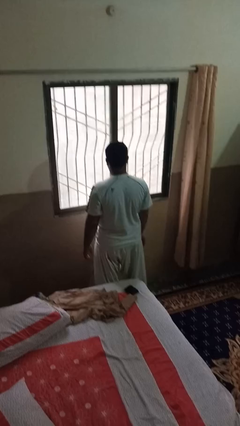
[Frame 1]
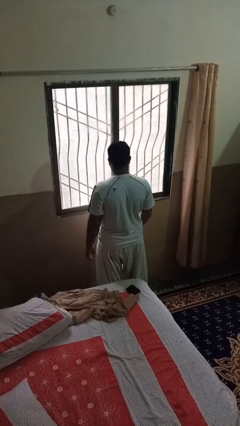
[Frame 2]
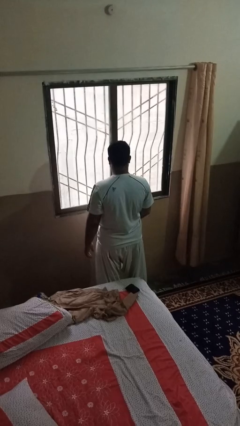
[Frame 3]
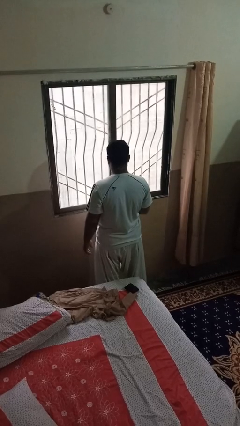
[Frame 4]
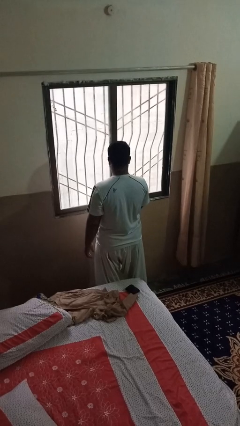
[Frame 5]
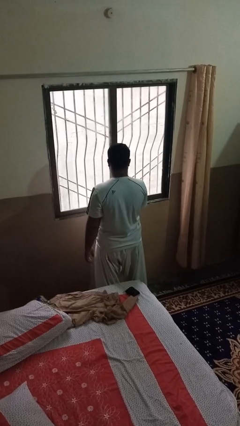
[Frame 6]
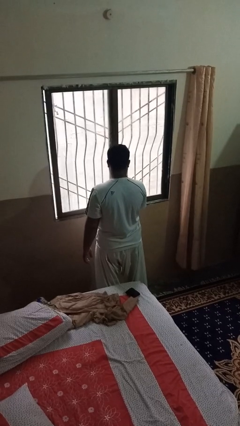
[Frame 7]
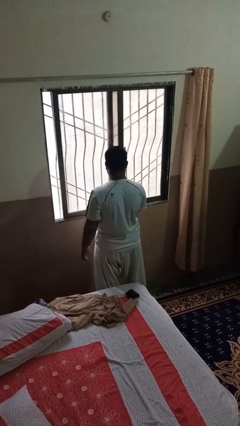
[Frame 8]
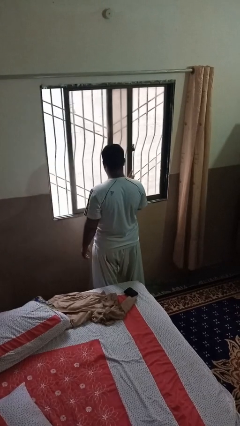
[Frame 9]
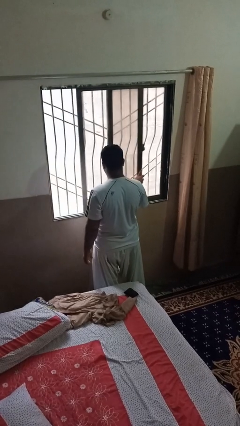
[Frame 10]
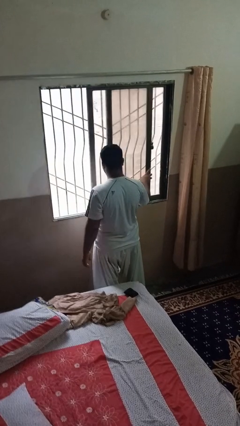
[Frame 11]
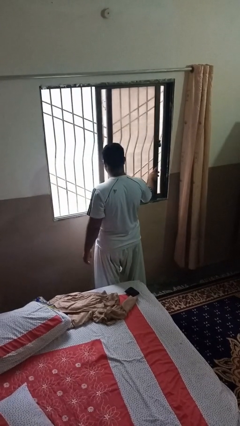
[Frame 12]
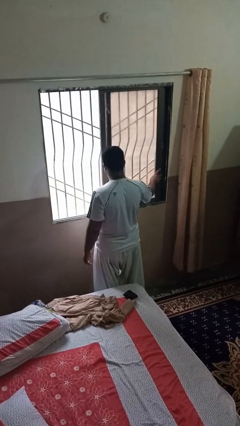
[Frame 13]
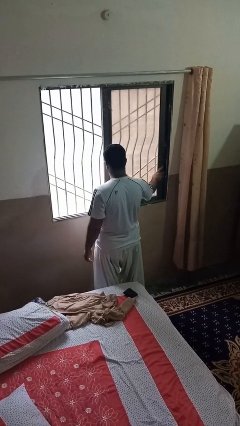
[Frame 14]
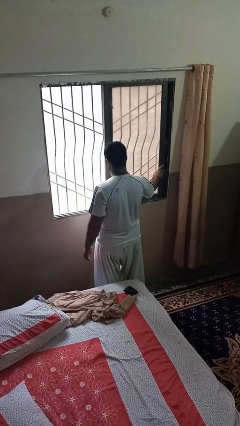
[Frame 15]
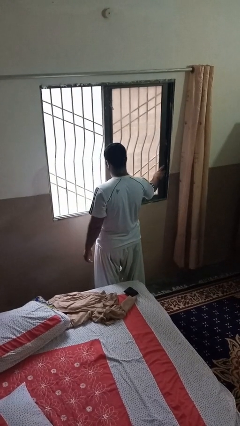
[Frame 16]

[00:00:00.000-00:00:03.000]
person opens home window

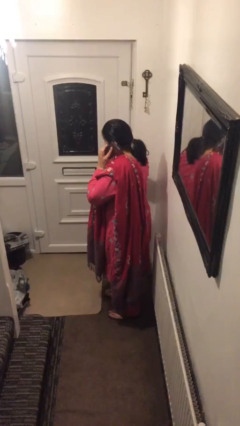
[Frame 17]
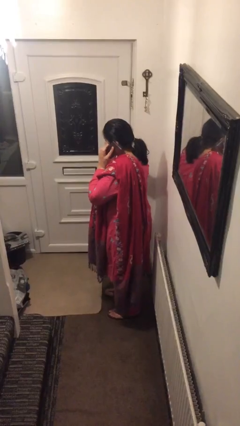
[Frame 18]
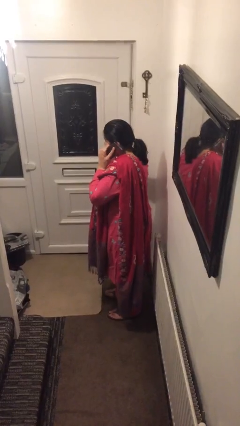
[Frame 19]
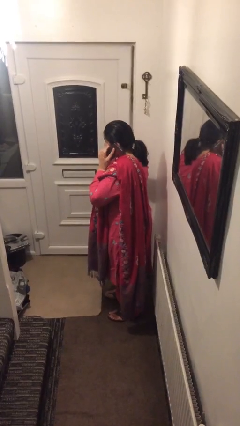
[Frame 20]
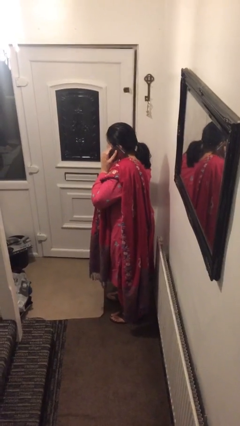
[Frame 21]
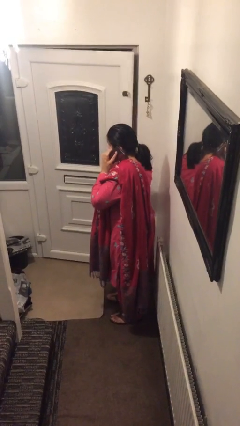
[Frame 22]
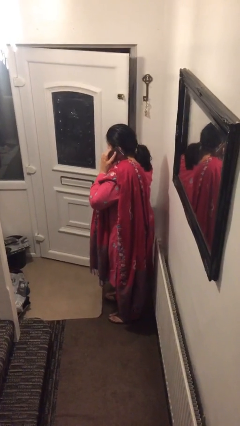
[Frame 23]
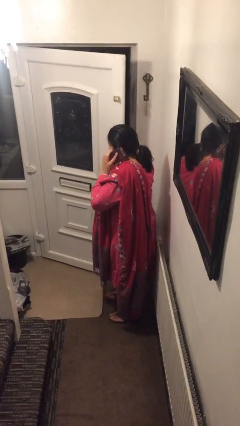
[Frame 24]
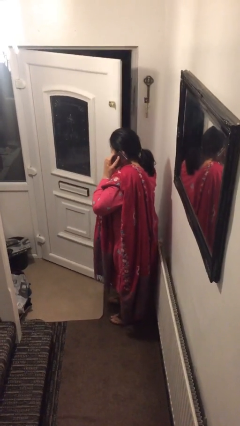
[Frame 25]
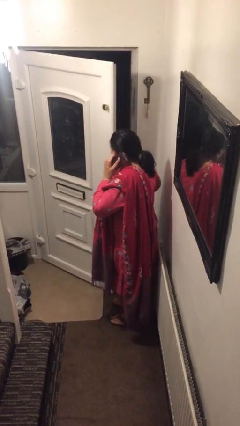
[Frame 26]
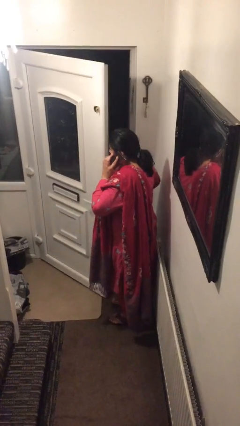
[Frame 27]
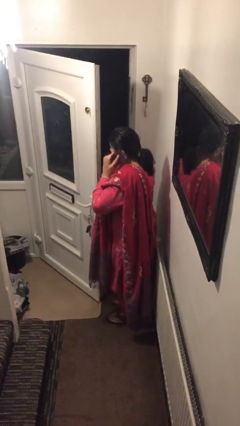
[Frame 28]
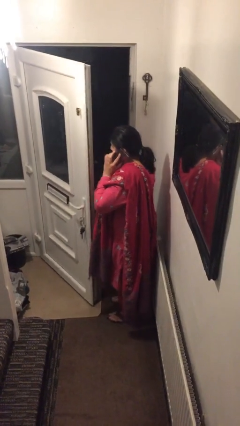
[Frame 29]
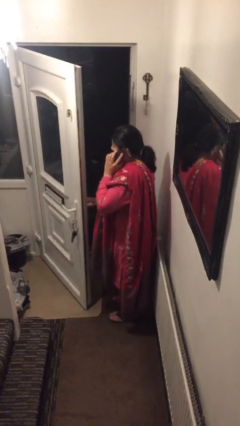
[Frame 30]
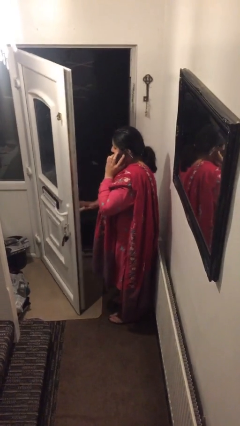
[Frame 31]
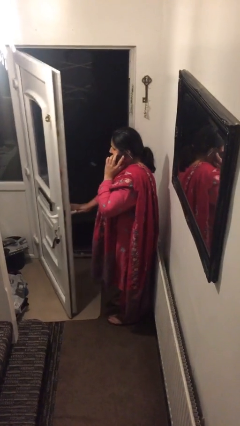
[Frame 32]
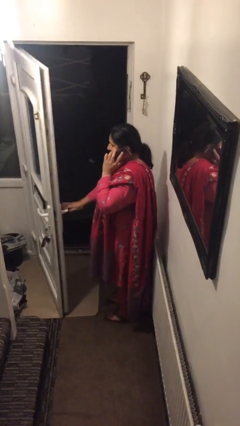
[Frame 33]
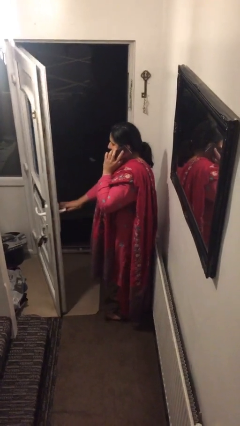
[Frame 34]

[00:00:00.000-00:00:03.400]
person opens facility door

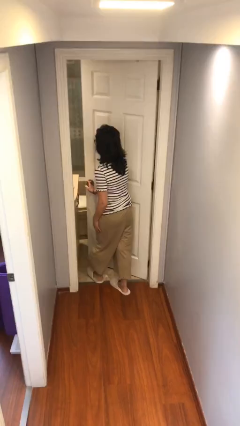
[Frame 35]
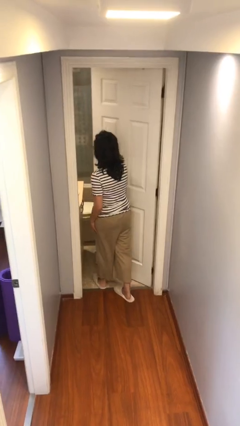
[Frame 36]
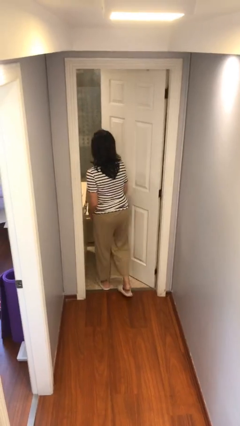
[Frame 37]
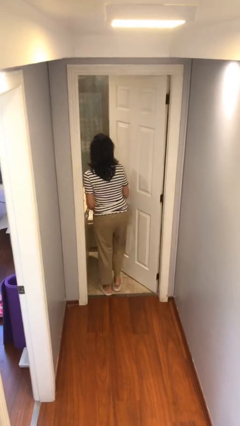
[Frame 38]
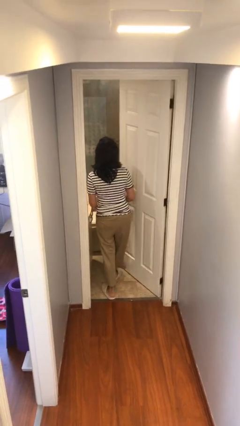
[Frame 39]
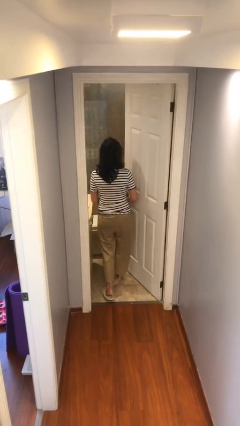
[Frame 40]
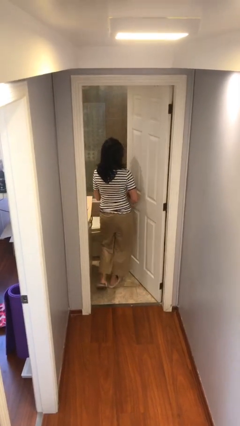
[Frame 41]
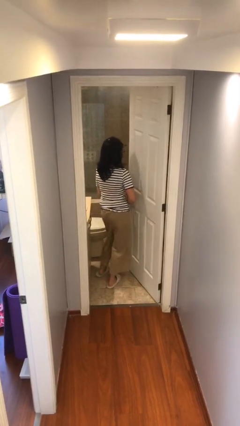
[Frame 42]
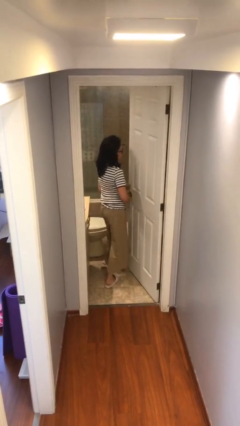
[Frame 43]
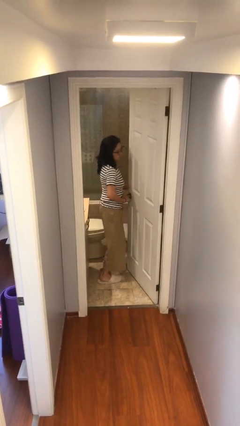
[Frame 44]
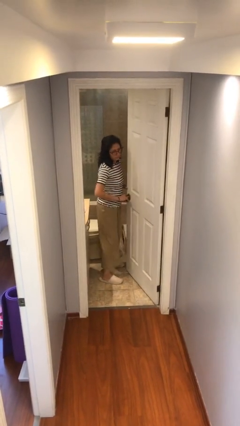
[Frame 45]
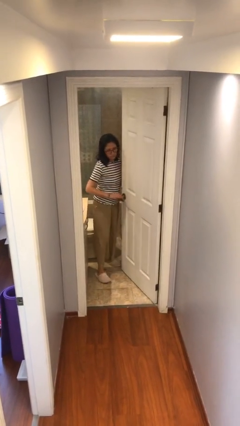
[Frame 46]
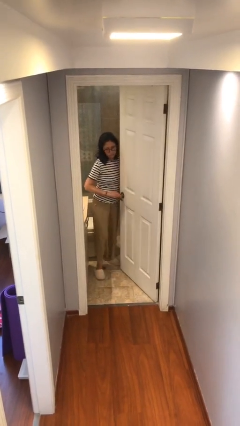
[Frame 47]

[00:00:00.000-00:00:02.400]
person exits scene through structure

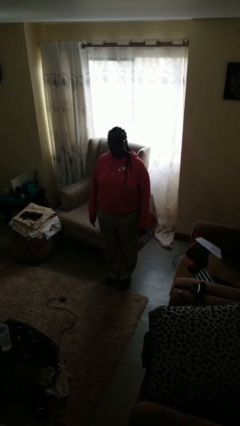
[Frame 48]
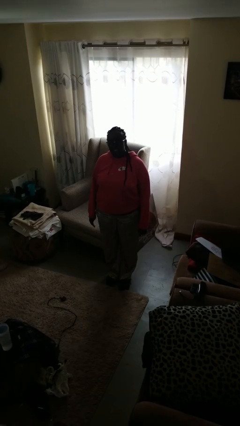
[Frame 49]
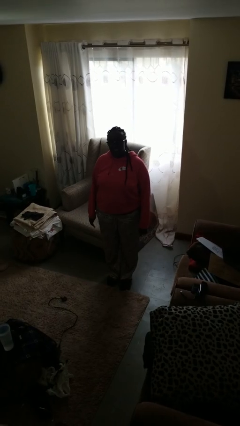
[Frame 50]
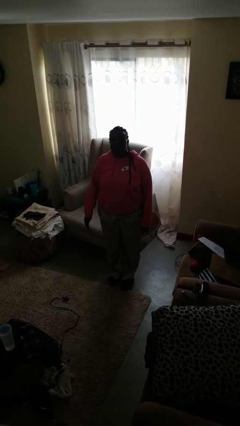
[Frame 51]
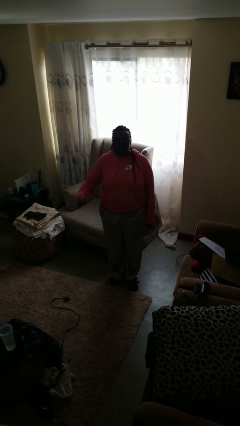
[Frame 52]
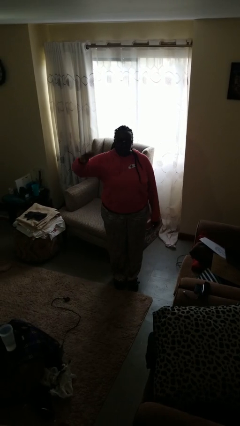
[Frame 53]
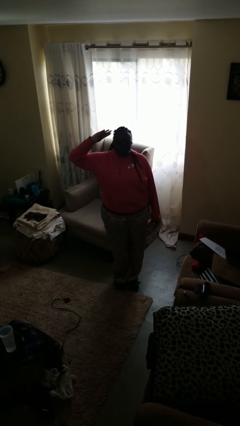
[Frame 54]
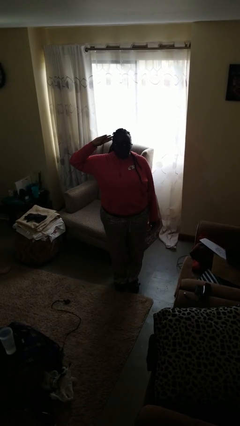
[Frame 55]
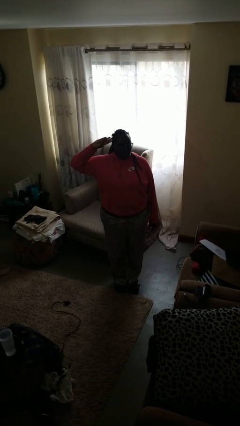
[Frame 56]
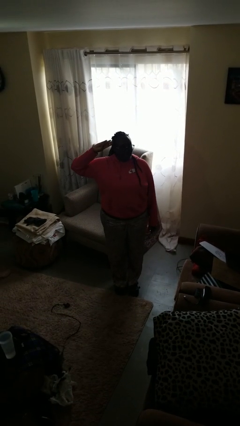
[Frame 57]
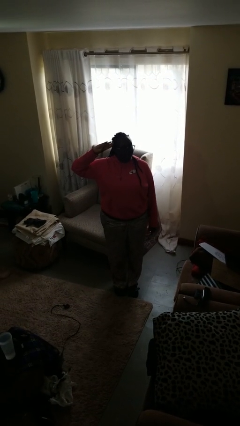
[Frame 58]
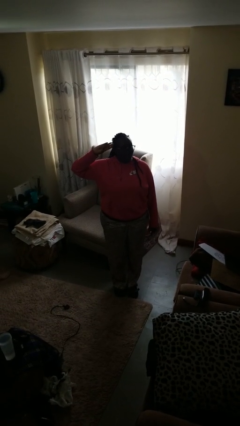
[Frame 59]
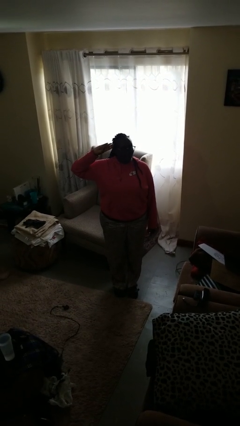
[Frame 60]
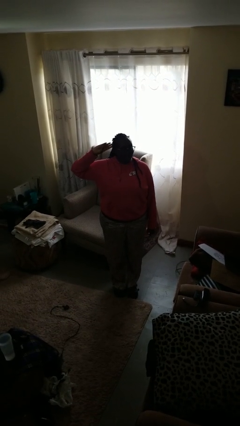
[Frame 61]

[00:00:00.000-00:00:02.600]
person salutes

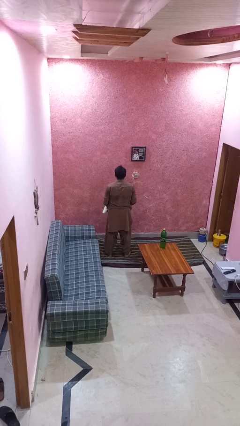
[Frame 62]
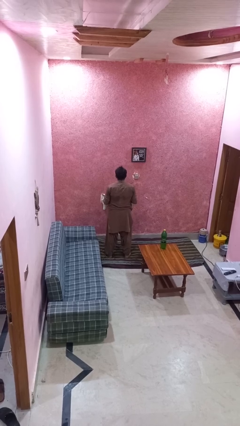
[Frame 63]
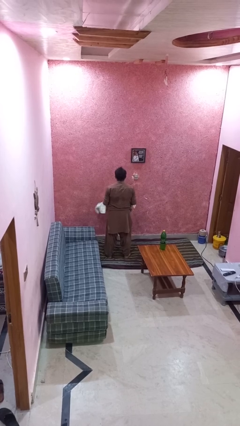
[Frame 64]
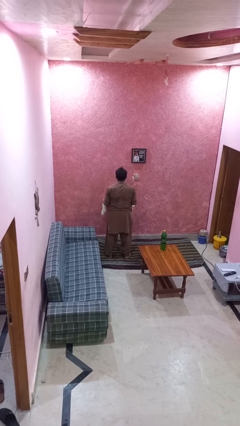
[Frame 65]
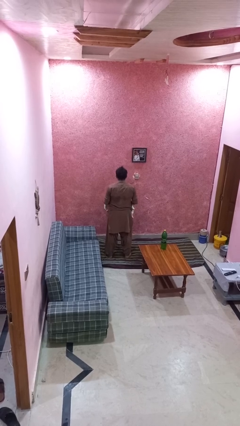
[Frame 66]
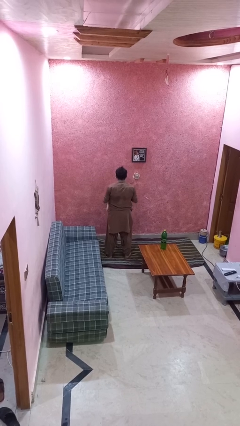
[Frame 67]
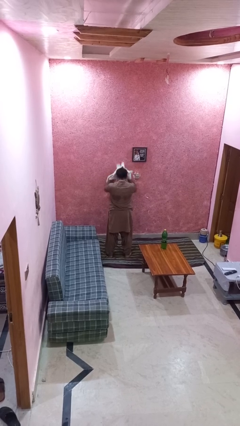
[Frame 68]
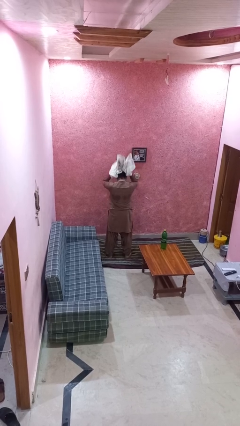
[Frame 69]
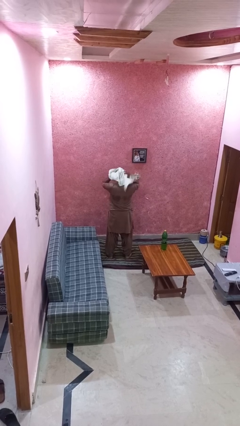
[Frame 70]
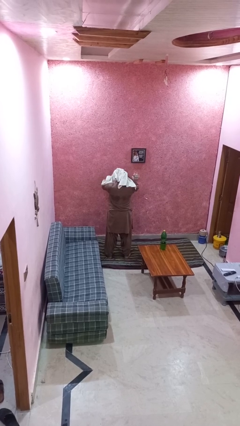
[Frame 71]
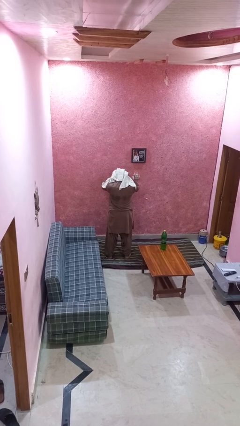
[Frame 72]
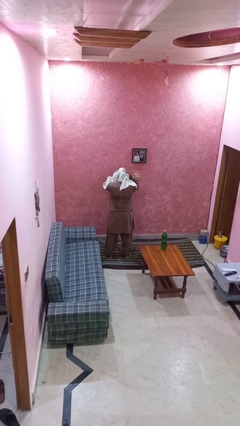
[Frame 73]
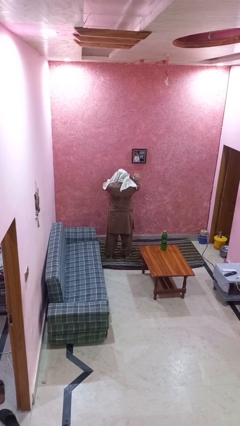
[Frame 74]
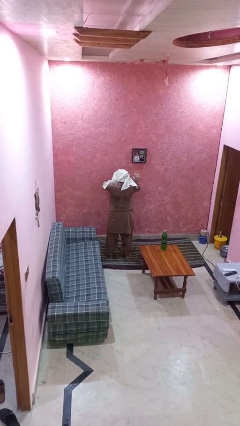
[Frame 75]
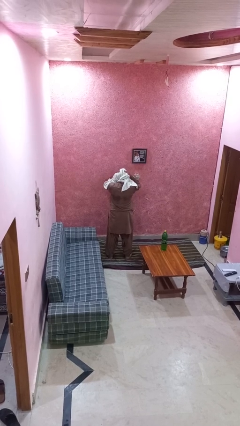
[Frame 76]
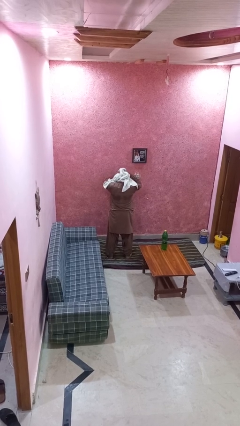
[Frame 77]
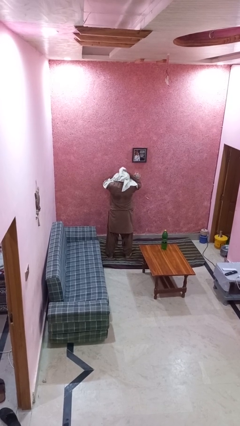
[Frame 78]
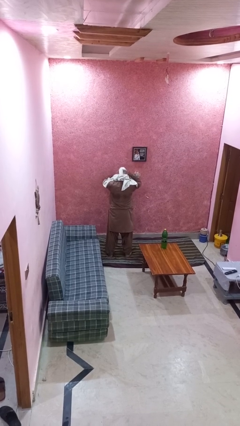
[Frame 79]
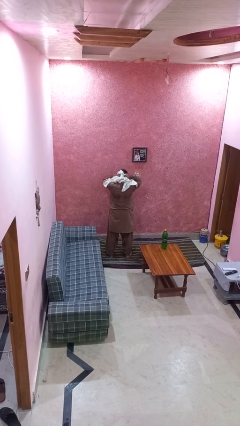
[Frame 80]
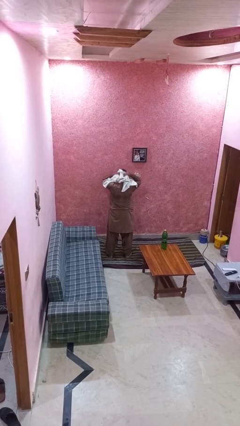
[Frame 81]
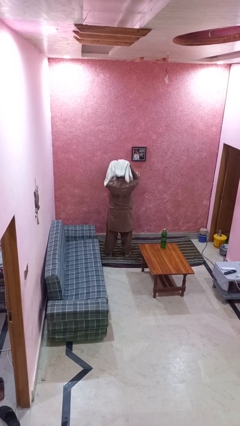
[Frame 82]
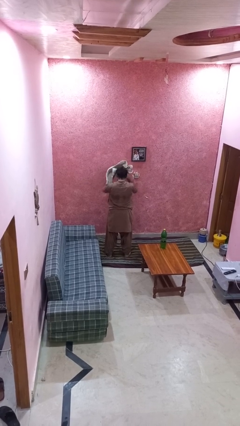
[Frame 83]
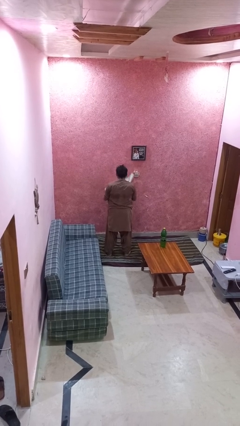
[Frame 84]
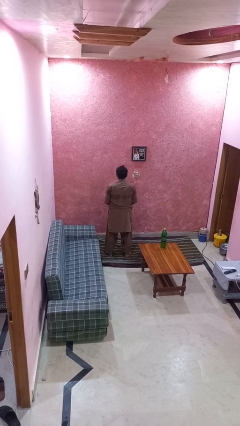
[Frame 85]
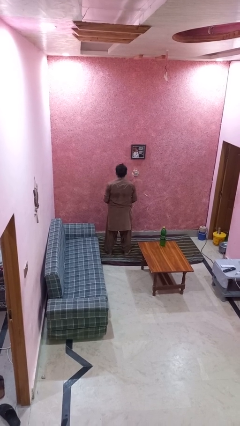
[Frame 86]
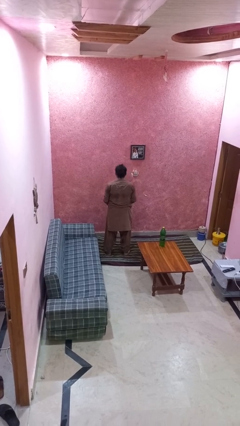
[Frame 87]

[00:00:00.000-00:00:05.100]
person dries hair with towel

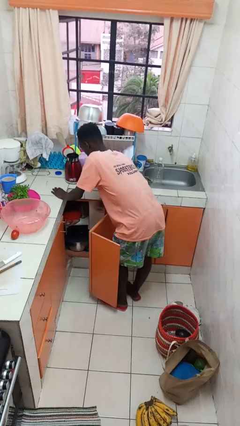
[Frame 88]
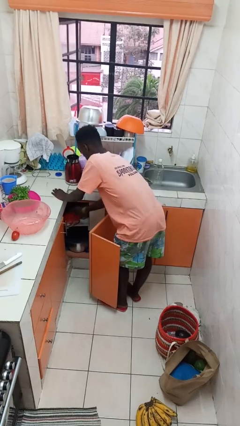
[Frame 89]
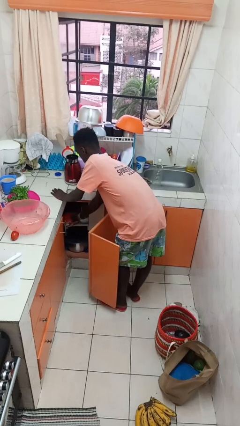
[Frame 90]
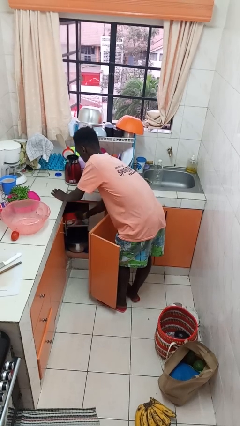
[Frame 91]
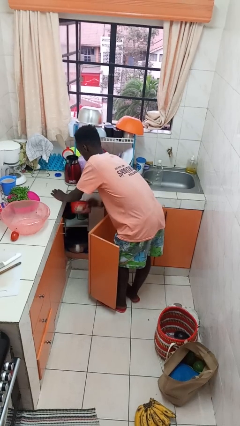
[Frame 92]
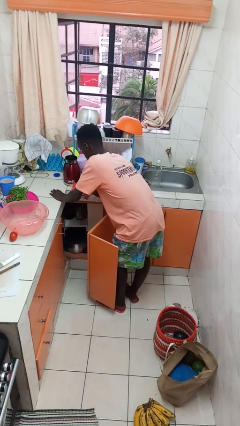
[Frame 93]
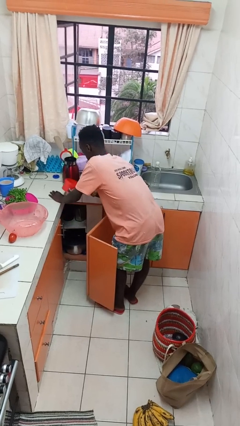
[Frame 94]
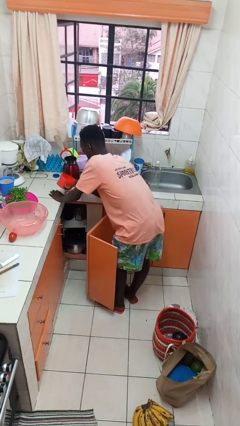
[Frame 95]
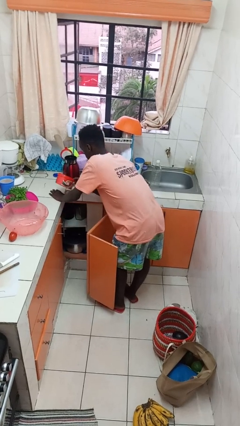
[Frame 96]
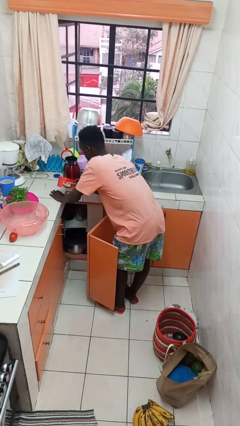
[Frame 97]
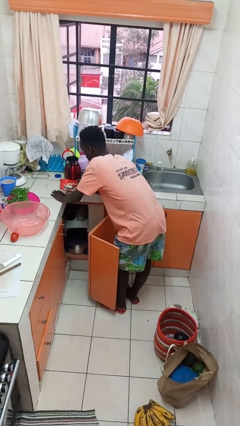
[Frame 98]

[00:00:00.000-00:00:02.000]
person takes object from cabinet
